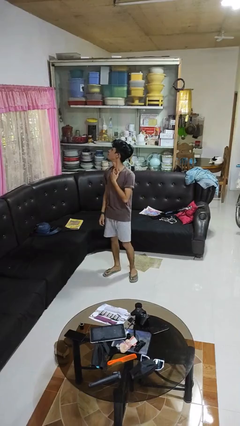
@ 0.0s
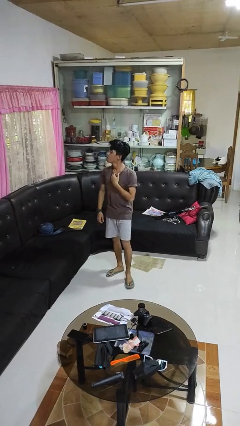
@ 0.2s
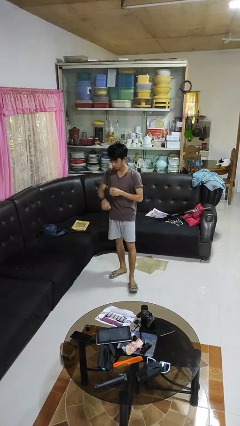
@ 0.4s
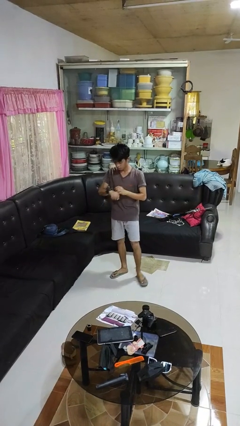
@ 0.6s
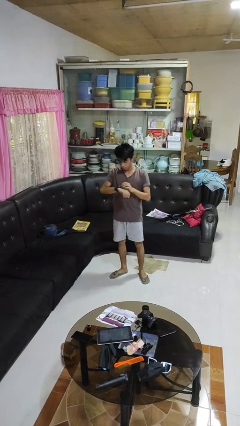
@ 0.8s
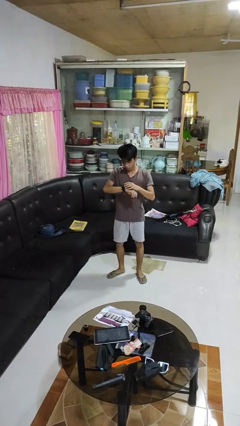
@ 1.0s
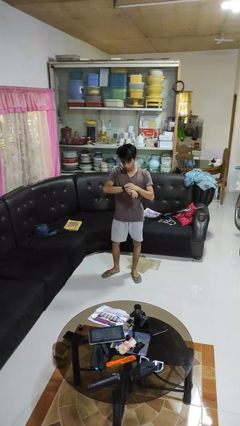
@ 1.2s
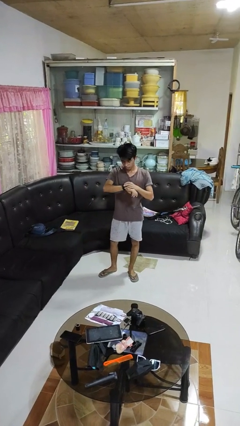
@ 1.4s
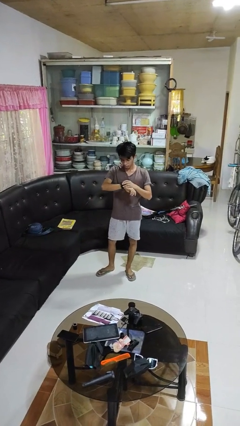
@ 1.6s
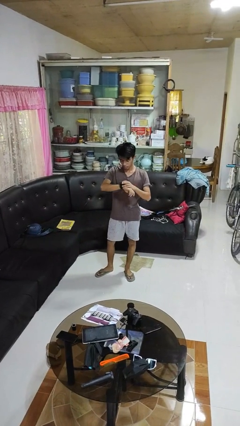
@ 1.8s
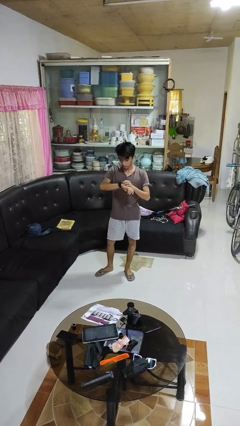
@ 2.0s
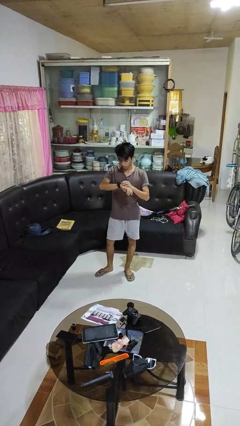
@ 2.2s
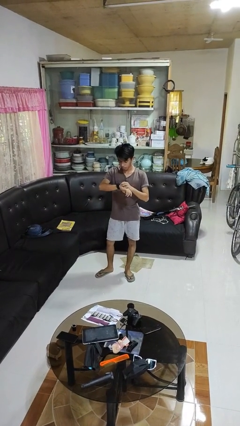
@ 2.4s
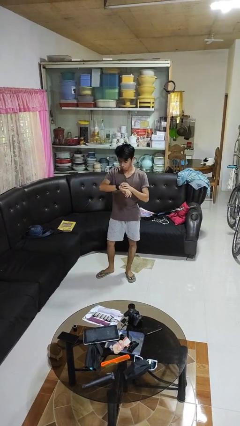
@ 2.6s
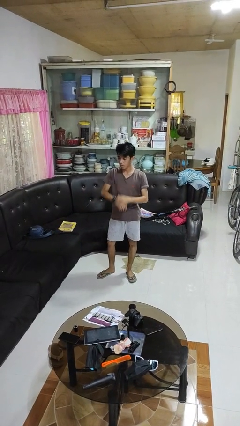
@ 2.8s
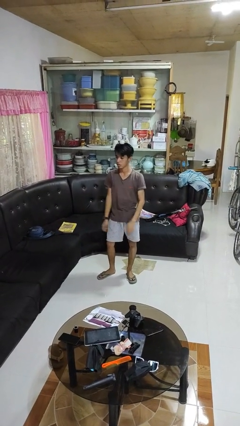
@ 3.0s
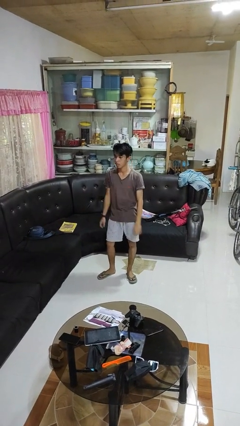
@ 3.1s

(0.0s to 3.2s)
person looks at wristwatch

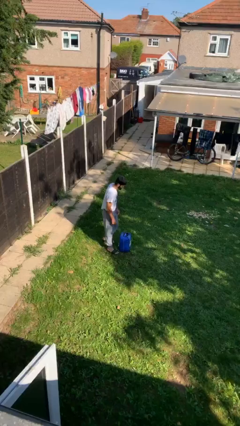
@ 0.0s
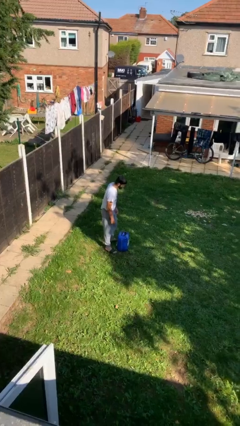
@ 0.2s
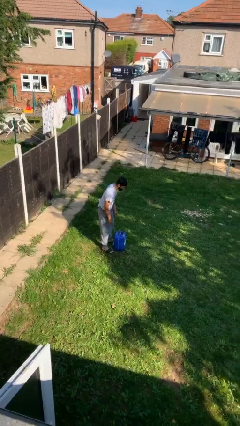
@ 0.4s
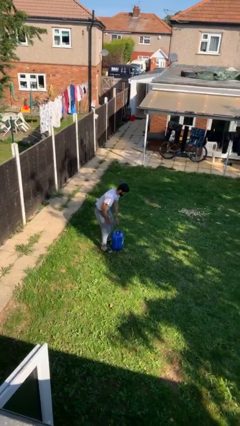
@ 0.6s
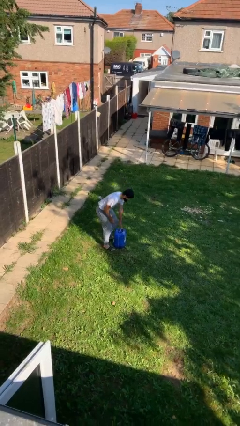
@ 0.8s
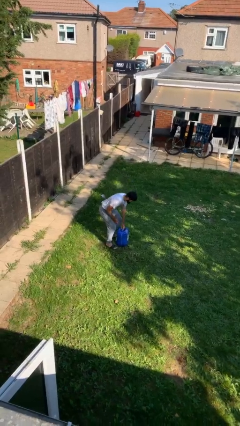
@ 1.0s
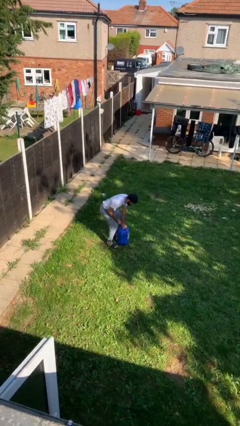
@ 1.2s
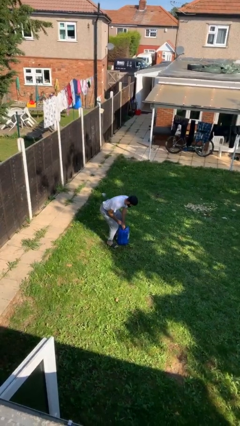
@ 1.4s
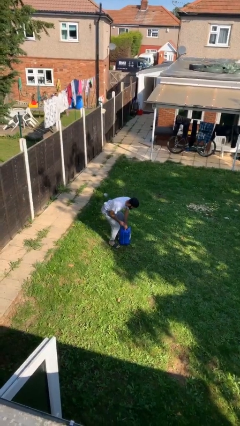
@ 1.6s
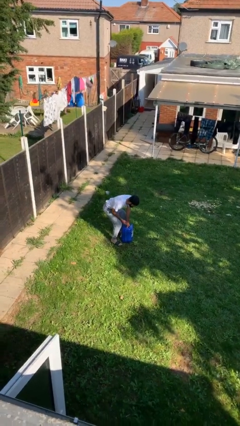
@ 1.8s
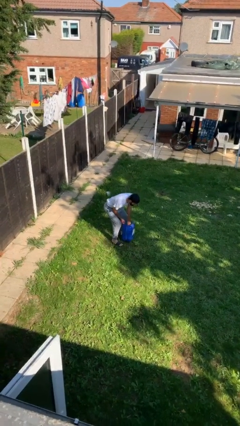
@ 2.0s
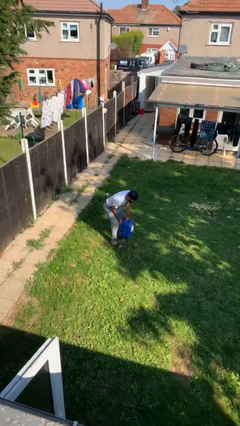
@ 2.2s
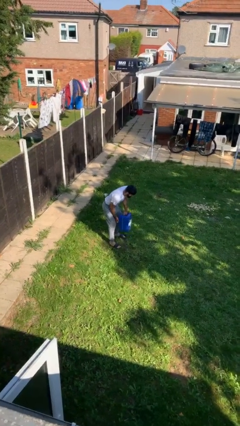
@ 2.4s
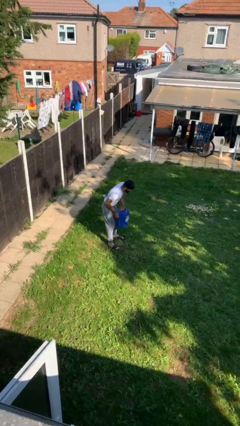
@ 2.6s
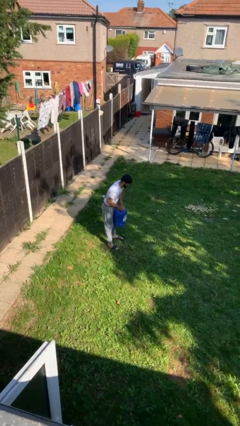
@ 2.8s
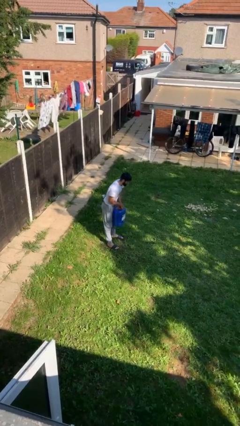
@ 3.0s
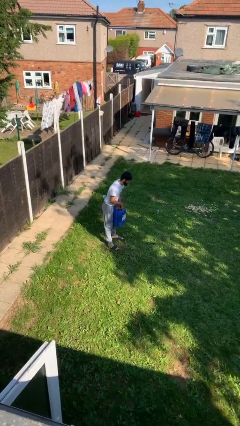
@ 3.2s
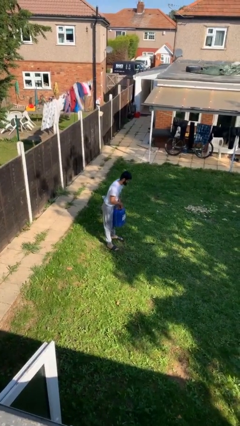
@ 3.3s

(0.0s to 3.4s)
person picks up object from floor

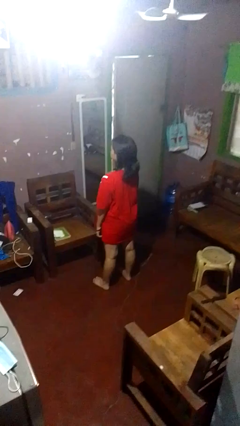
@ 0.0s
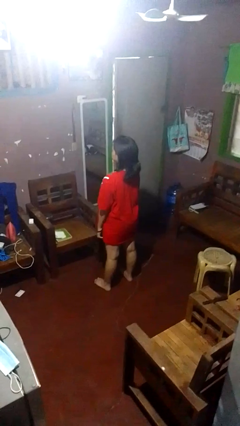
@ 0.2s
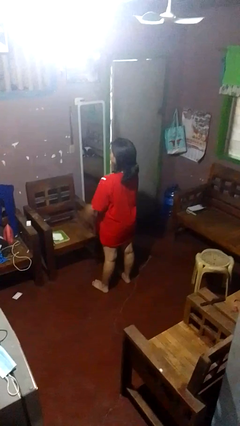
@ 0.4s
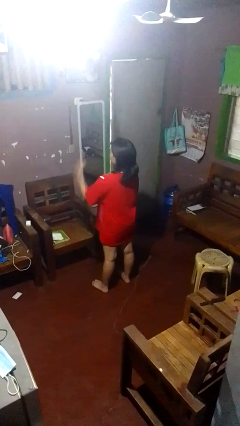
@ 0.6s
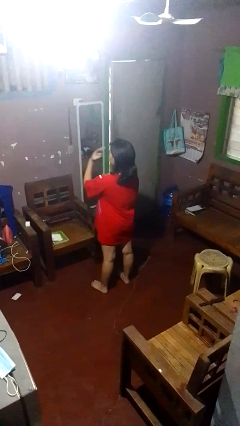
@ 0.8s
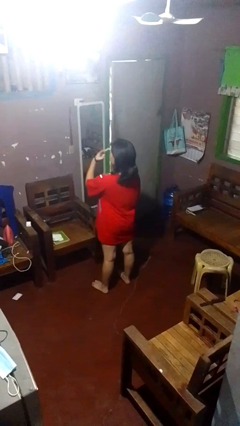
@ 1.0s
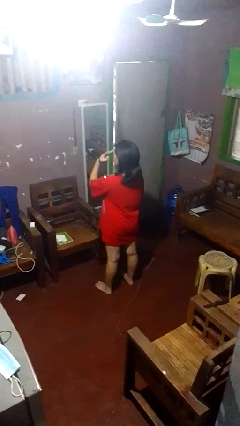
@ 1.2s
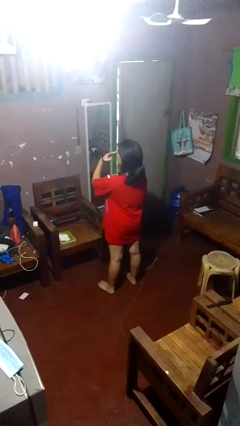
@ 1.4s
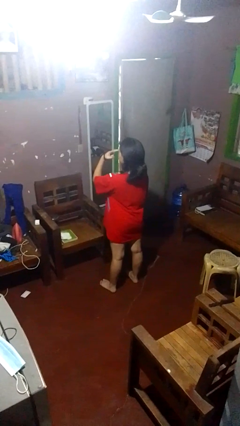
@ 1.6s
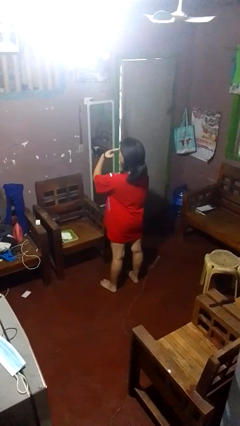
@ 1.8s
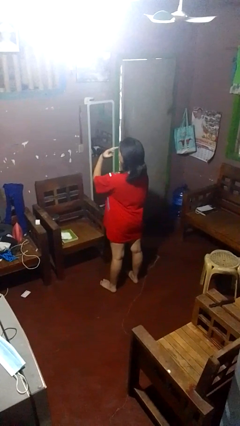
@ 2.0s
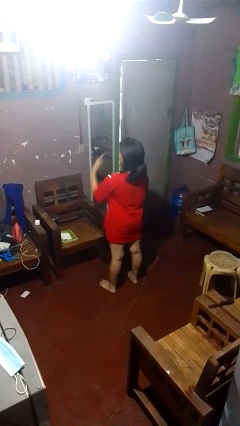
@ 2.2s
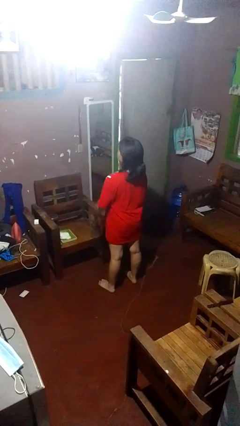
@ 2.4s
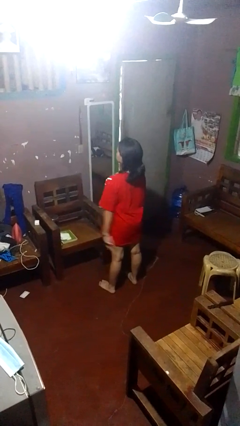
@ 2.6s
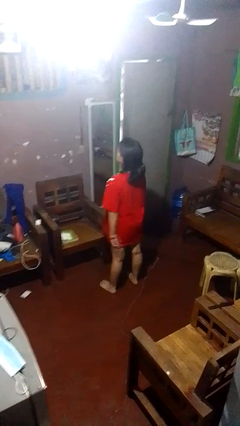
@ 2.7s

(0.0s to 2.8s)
person gestures watch closely

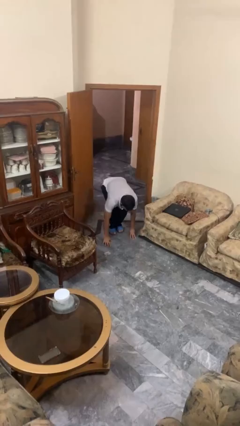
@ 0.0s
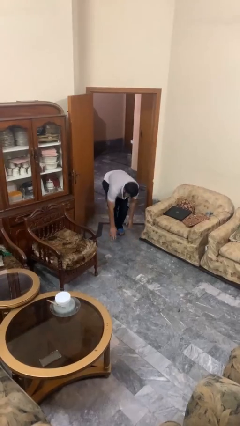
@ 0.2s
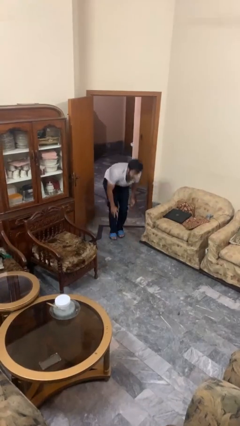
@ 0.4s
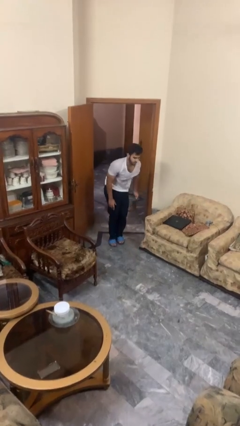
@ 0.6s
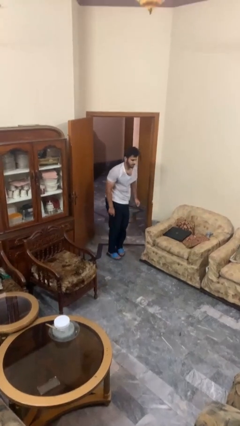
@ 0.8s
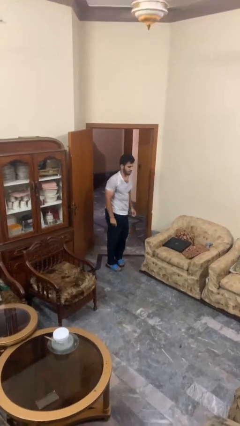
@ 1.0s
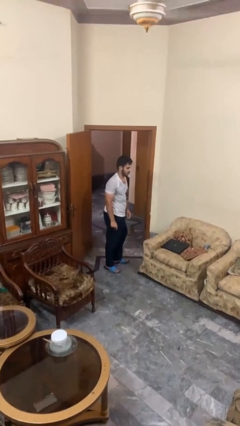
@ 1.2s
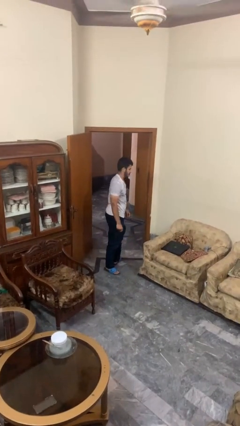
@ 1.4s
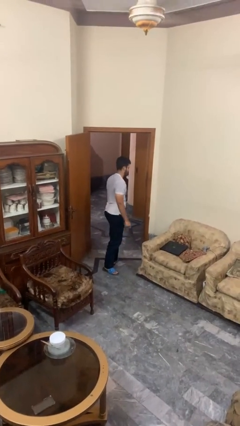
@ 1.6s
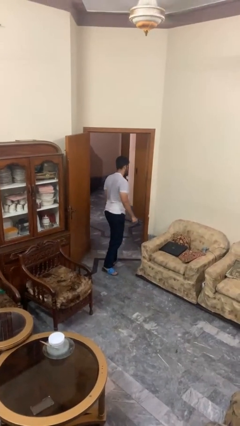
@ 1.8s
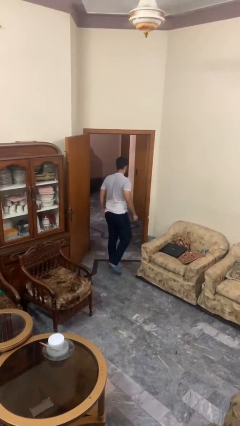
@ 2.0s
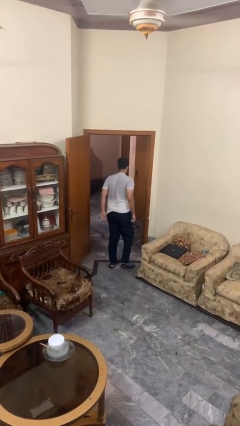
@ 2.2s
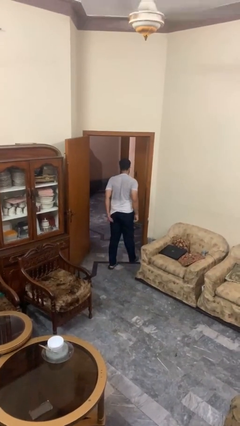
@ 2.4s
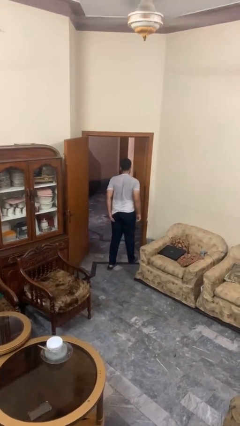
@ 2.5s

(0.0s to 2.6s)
person stands up from floor

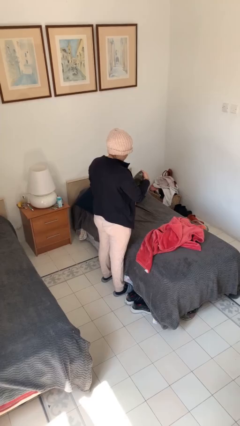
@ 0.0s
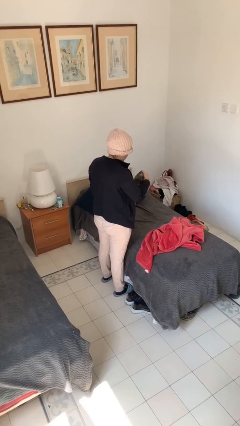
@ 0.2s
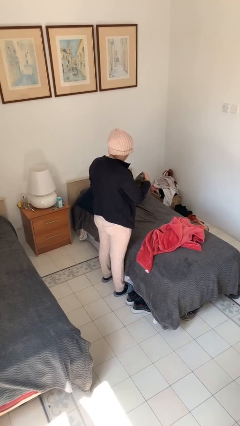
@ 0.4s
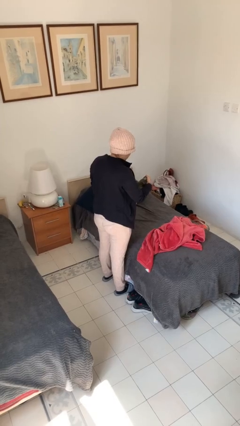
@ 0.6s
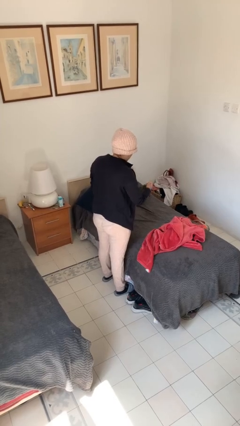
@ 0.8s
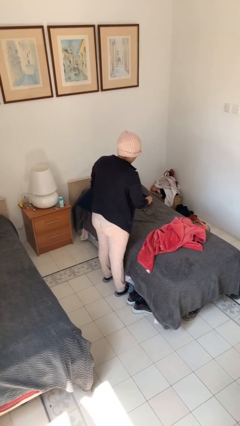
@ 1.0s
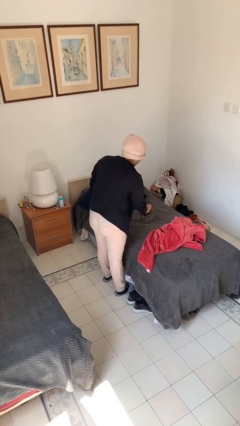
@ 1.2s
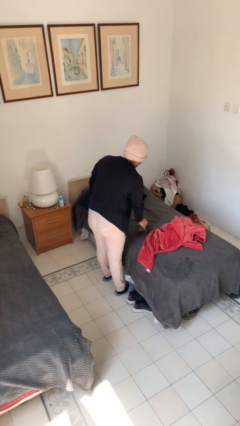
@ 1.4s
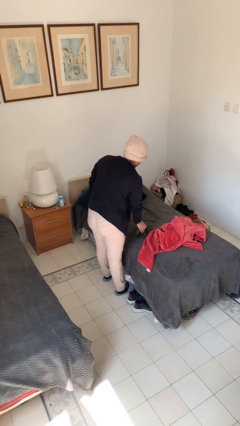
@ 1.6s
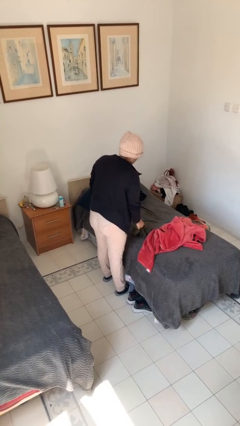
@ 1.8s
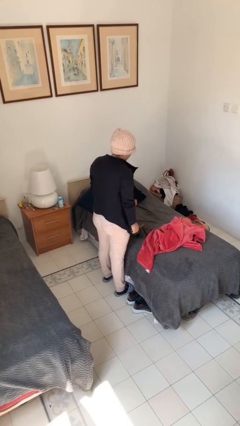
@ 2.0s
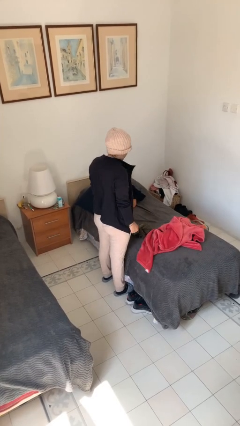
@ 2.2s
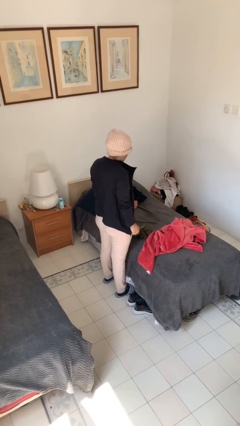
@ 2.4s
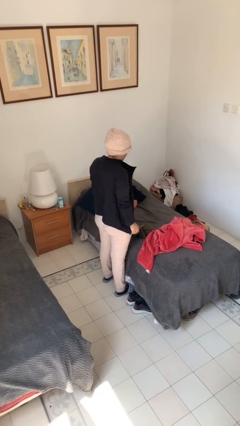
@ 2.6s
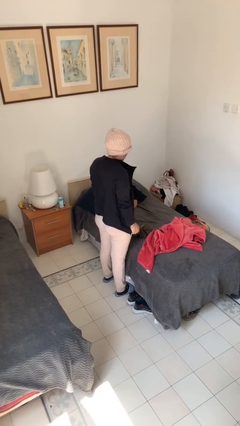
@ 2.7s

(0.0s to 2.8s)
person puts down object on couch

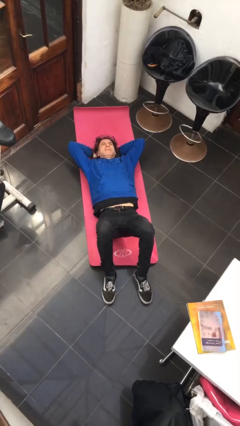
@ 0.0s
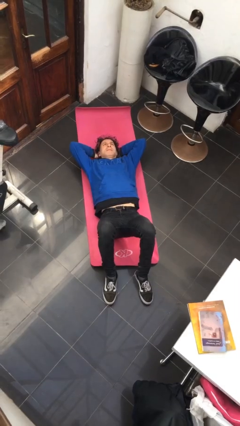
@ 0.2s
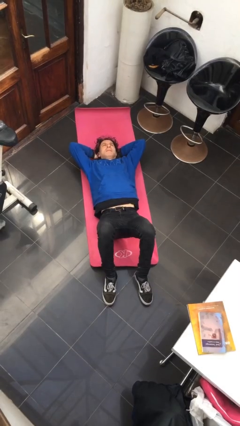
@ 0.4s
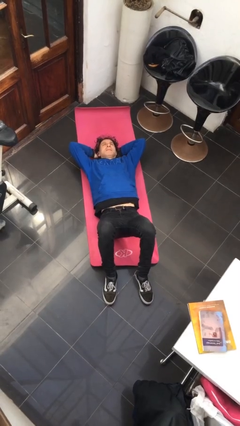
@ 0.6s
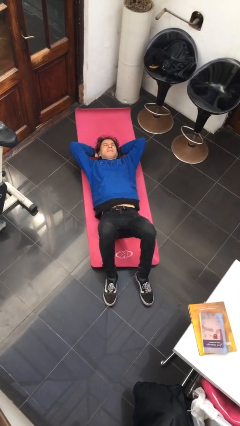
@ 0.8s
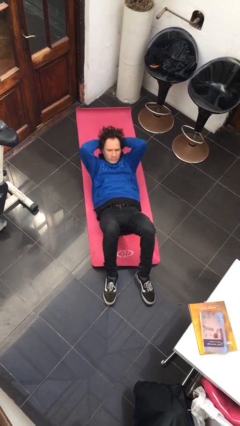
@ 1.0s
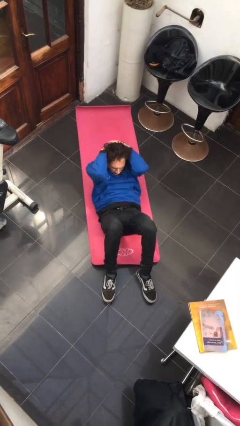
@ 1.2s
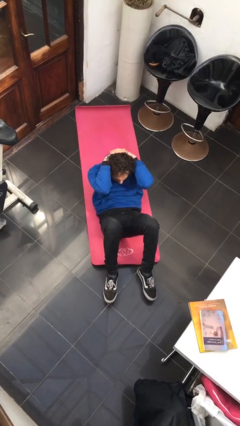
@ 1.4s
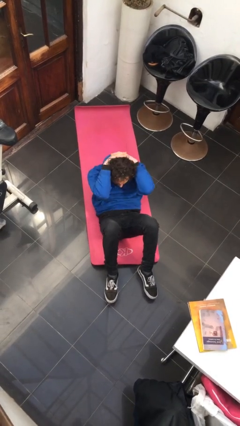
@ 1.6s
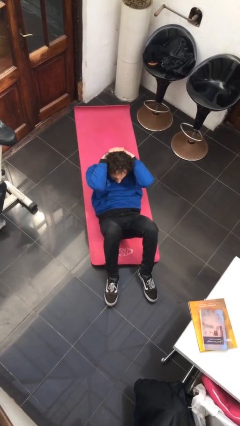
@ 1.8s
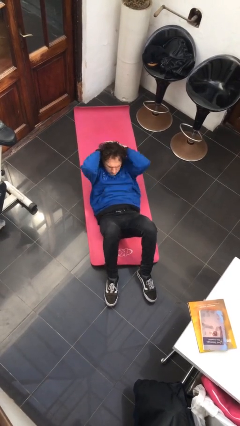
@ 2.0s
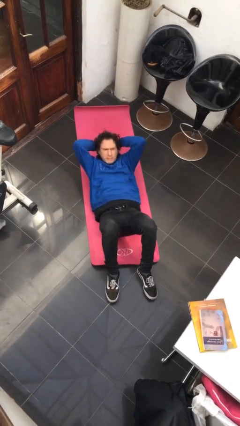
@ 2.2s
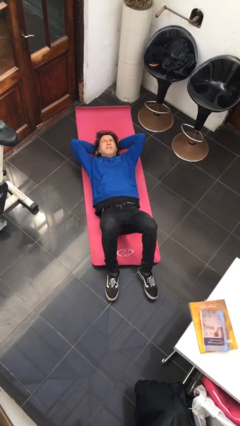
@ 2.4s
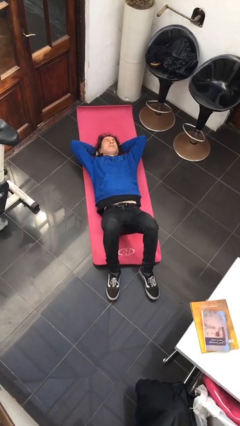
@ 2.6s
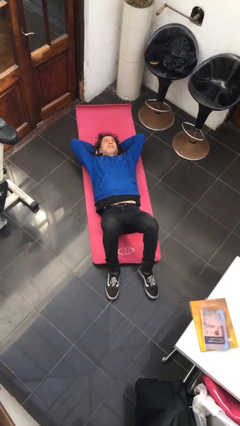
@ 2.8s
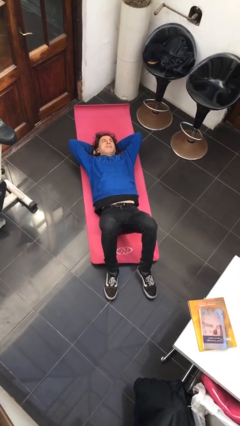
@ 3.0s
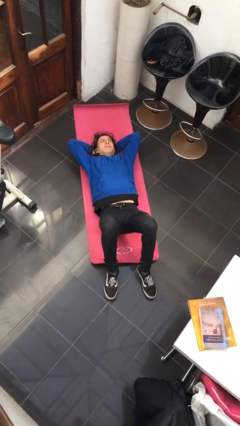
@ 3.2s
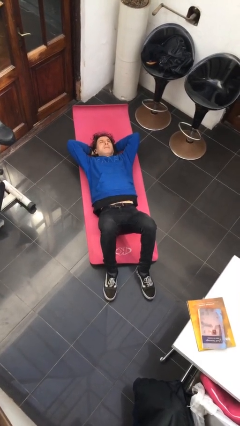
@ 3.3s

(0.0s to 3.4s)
person exercises with situp
